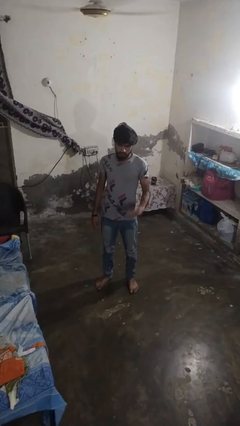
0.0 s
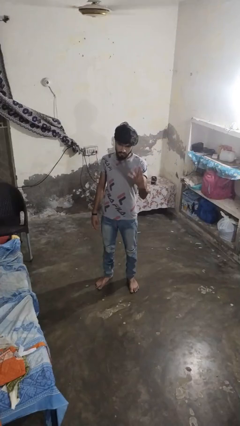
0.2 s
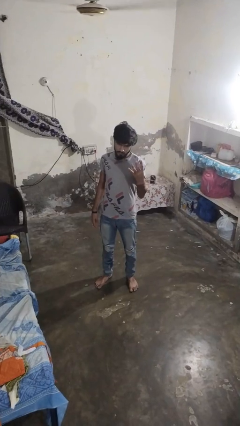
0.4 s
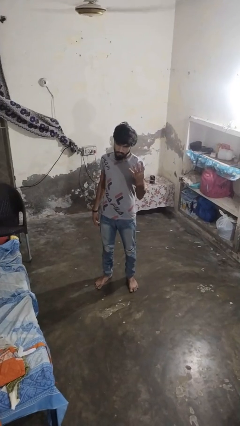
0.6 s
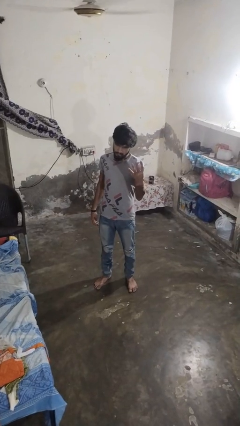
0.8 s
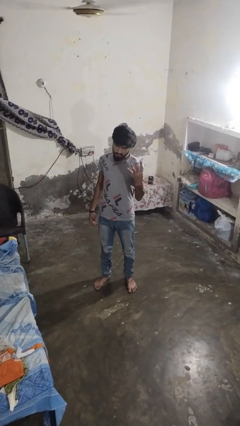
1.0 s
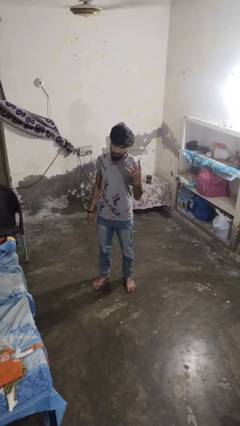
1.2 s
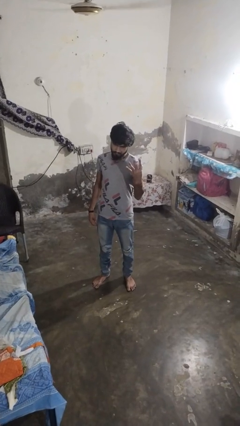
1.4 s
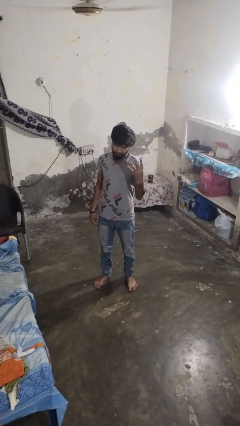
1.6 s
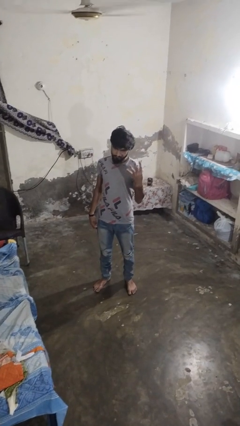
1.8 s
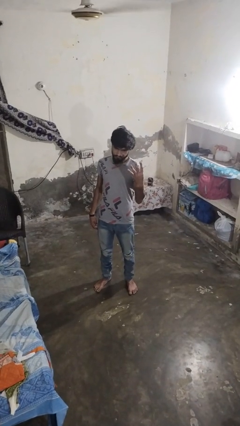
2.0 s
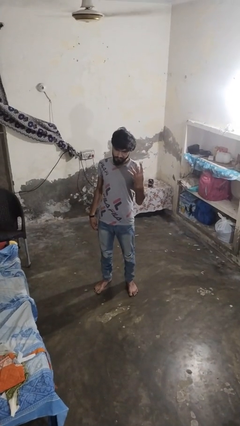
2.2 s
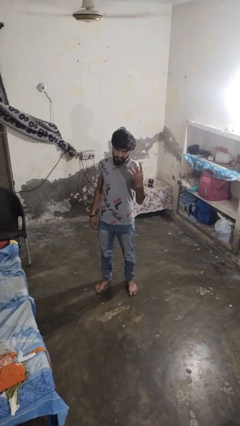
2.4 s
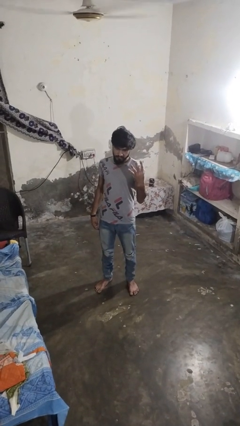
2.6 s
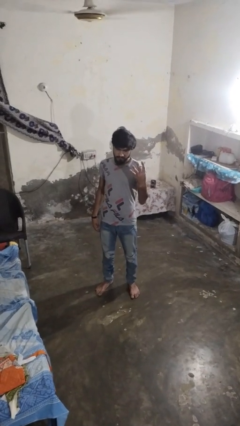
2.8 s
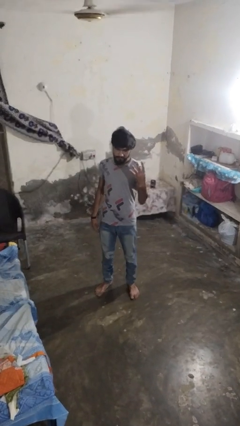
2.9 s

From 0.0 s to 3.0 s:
person gestures number four

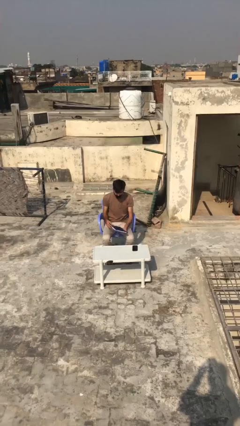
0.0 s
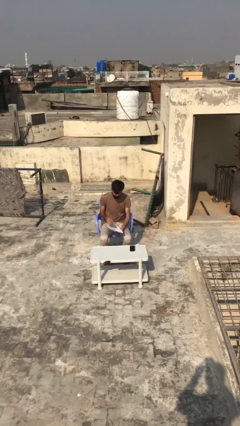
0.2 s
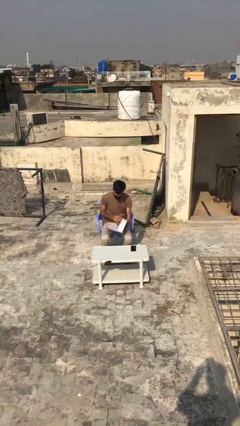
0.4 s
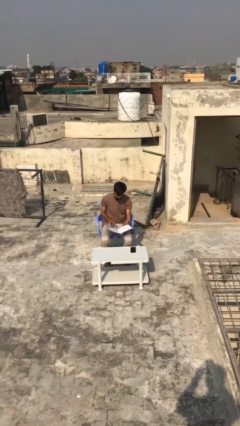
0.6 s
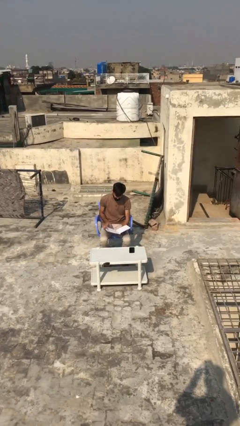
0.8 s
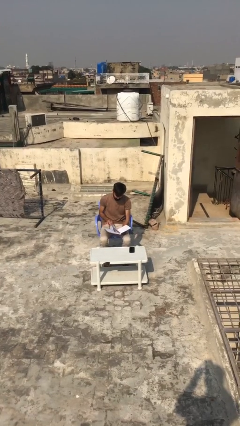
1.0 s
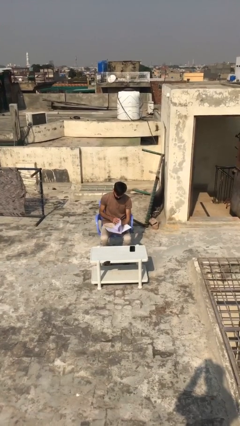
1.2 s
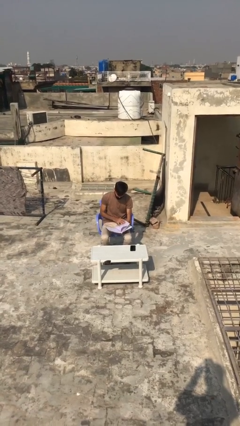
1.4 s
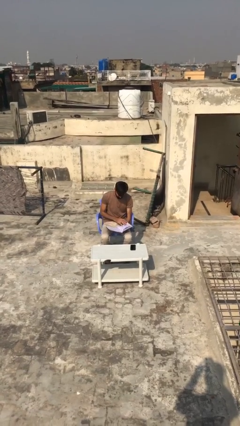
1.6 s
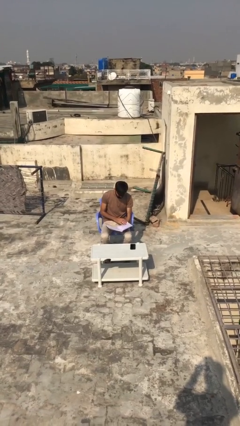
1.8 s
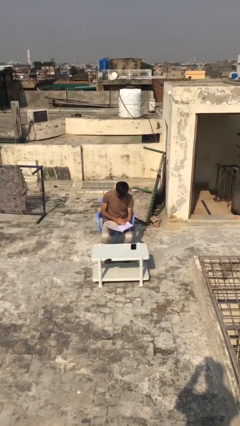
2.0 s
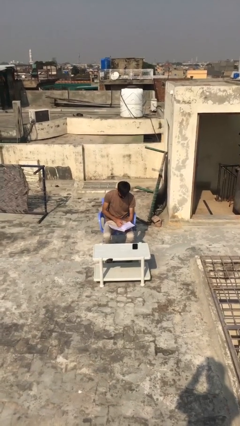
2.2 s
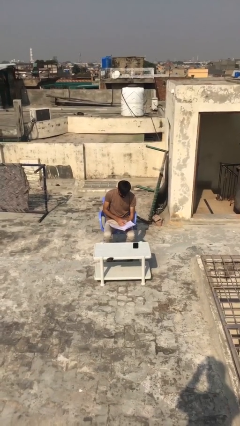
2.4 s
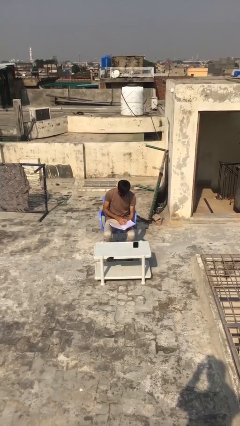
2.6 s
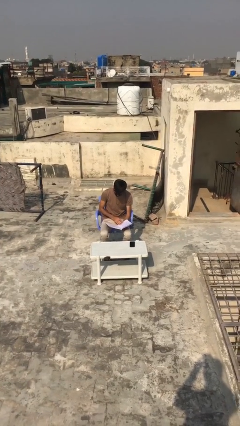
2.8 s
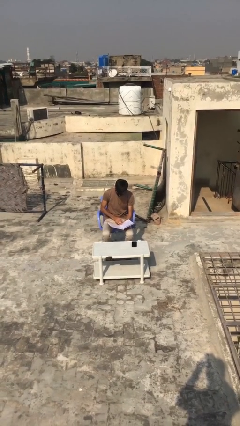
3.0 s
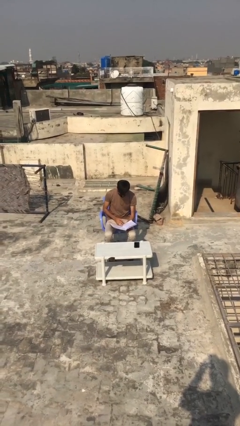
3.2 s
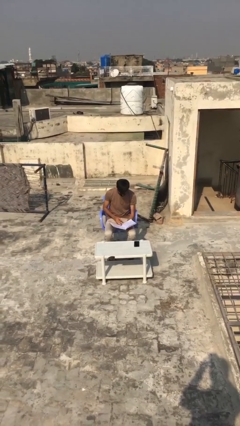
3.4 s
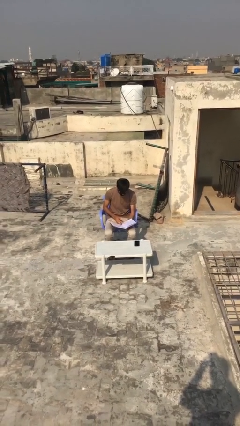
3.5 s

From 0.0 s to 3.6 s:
person reads document

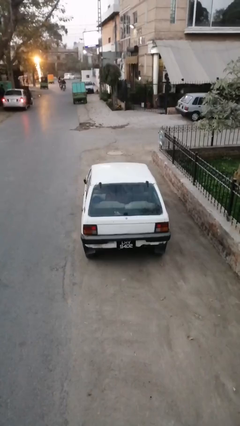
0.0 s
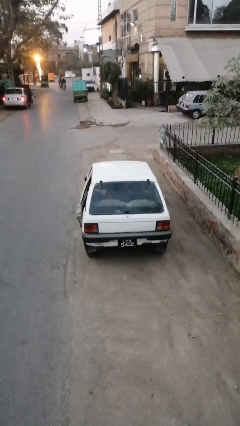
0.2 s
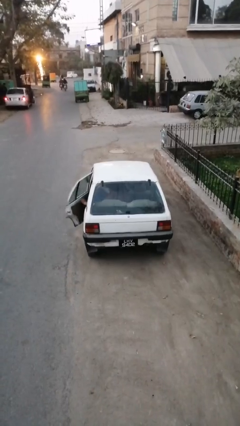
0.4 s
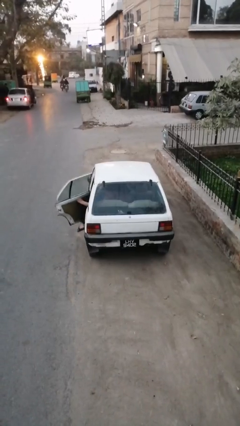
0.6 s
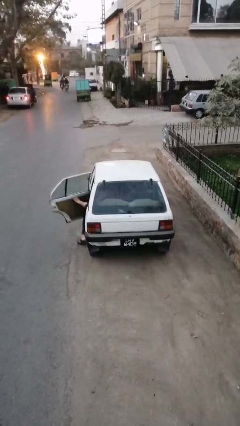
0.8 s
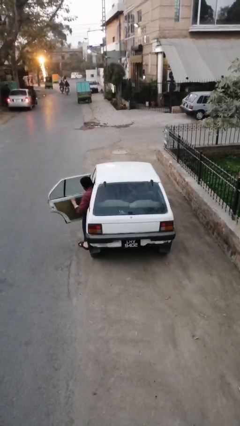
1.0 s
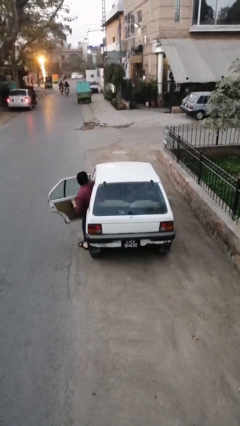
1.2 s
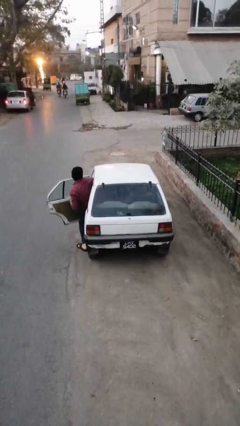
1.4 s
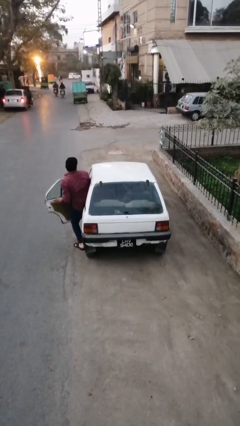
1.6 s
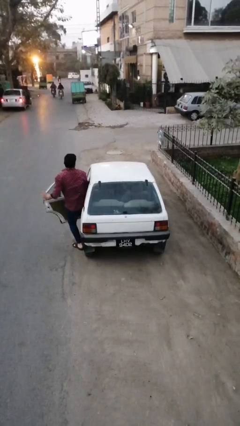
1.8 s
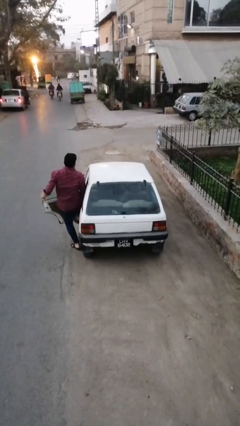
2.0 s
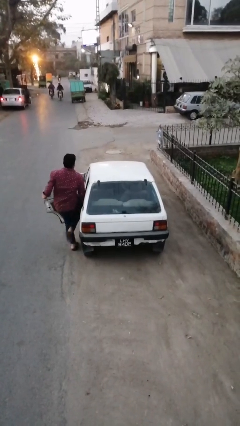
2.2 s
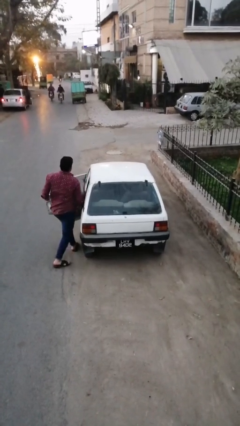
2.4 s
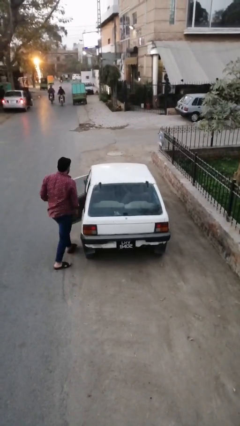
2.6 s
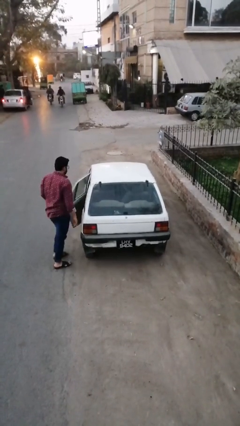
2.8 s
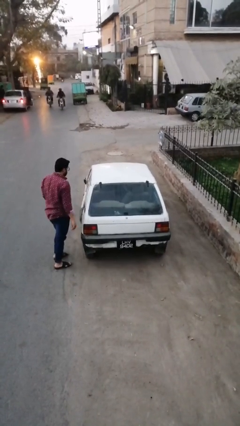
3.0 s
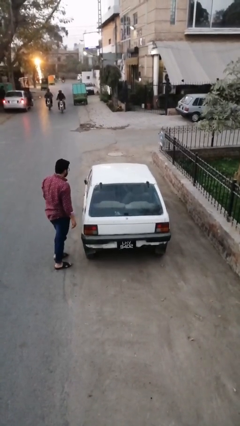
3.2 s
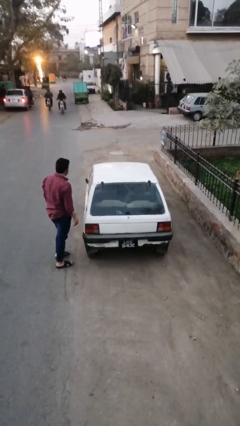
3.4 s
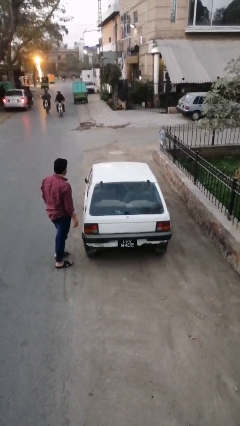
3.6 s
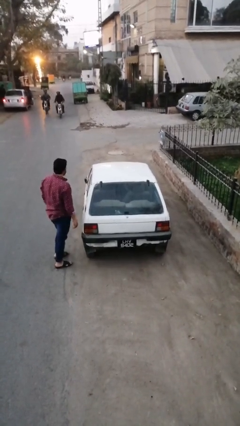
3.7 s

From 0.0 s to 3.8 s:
car drops off person

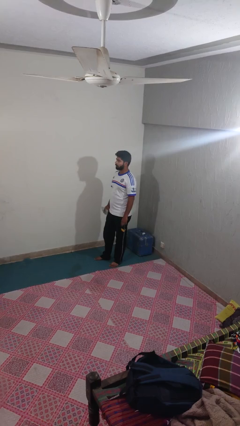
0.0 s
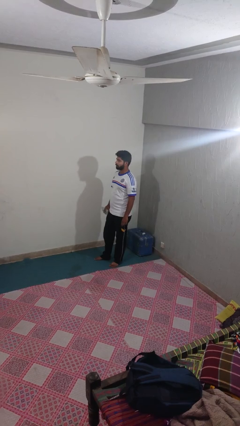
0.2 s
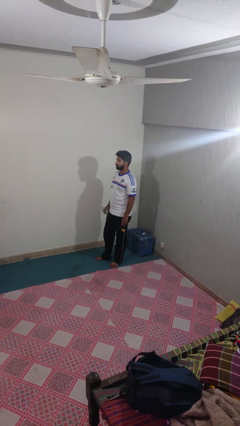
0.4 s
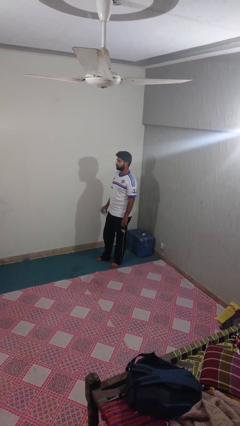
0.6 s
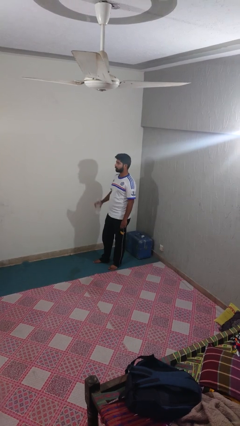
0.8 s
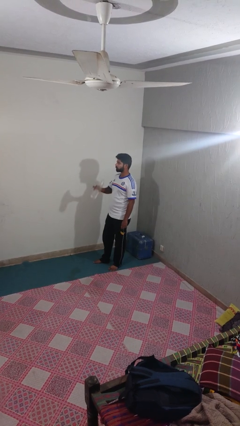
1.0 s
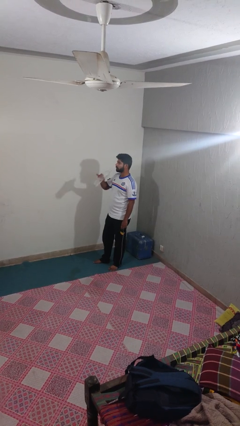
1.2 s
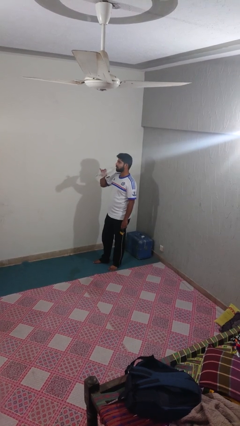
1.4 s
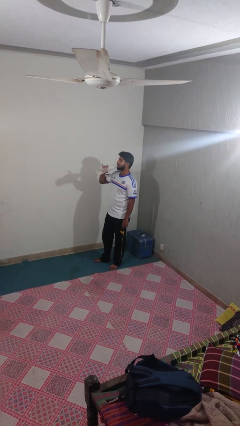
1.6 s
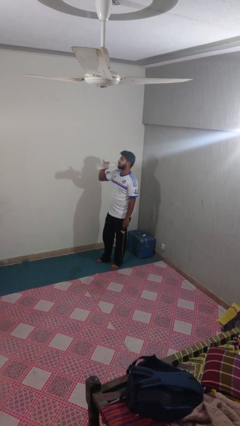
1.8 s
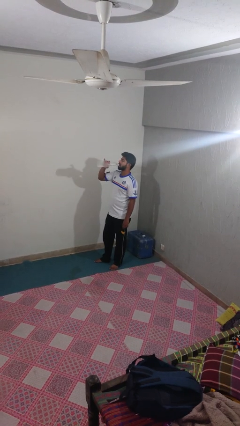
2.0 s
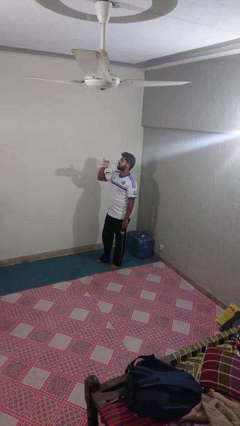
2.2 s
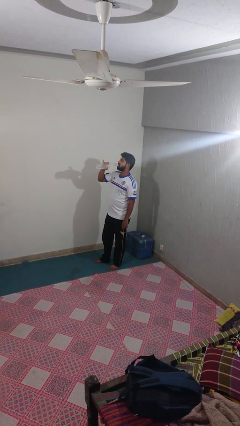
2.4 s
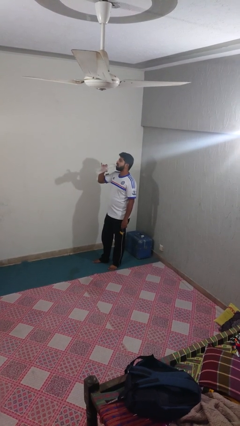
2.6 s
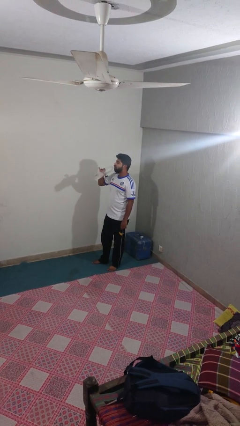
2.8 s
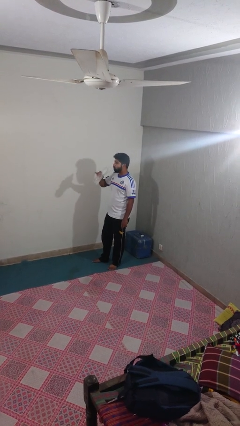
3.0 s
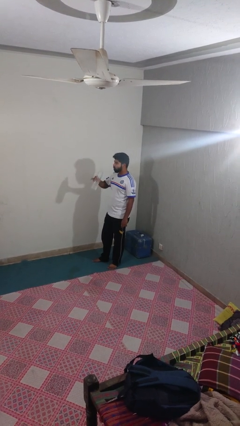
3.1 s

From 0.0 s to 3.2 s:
person drinks from bottle
